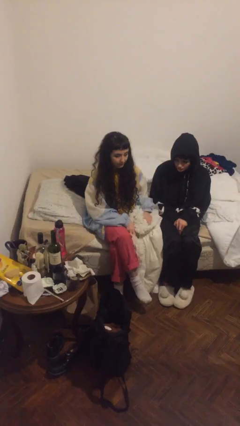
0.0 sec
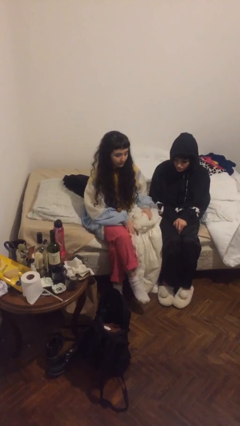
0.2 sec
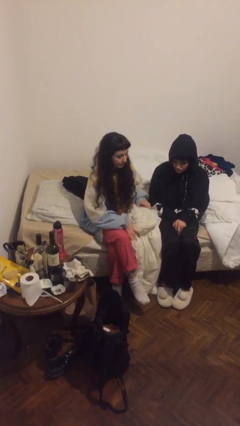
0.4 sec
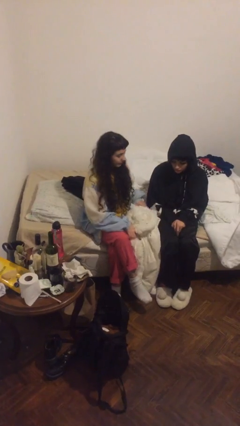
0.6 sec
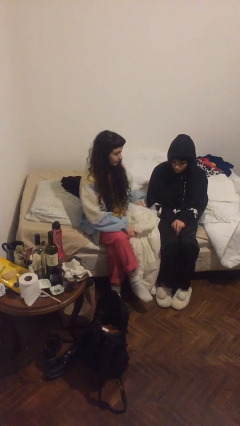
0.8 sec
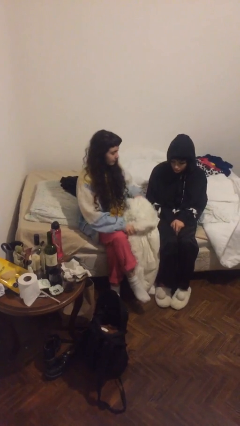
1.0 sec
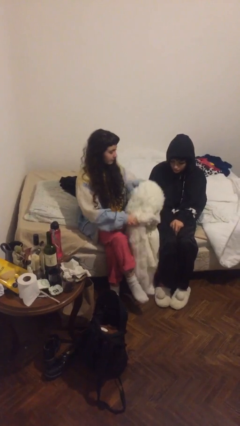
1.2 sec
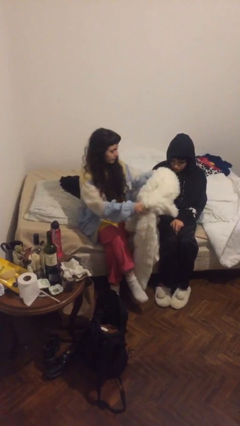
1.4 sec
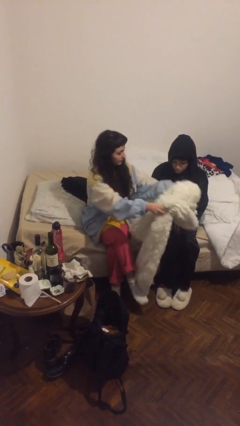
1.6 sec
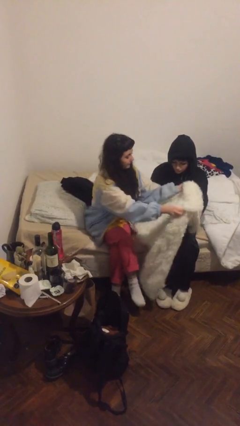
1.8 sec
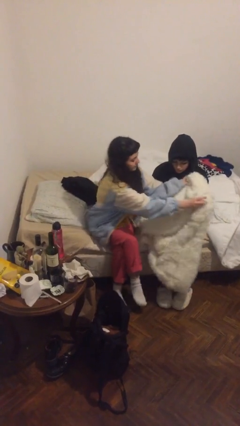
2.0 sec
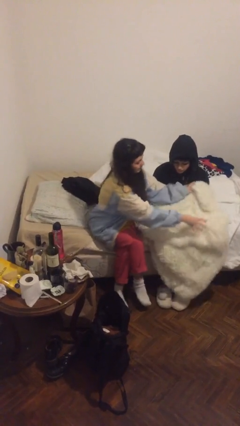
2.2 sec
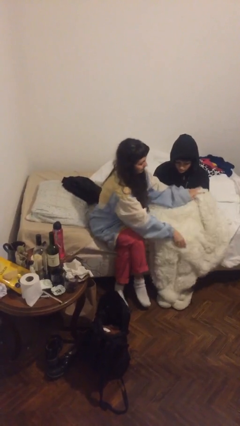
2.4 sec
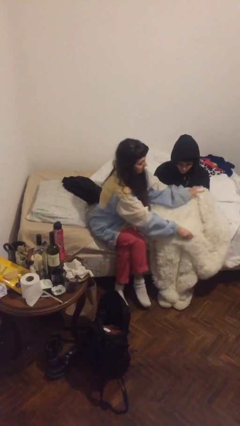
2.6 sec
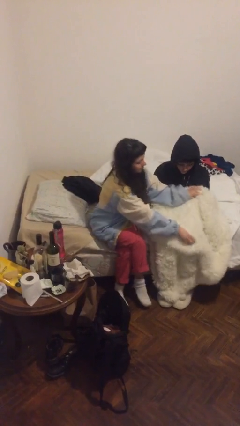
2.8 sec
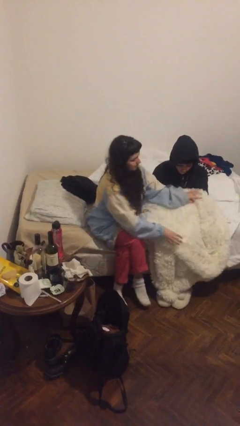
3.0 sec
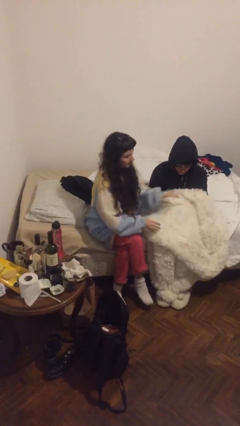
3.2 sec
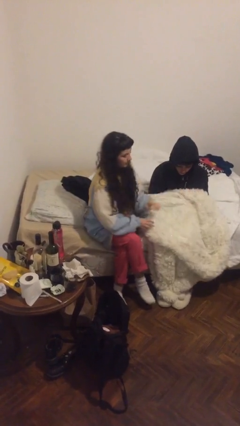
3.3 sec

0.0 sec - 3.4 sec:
person covers friend with blanket

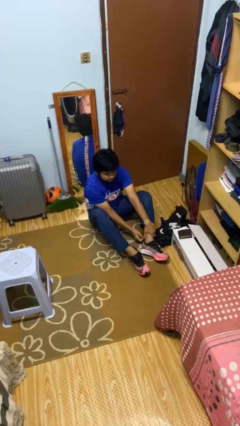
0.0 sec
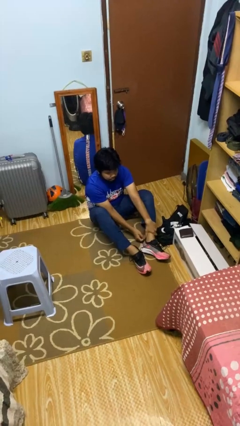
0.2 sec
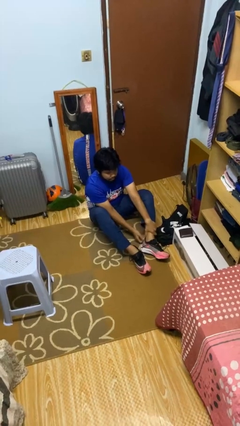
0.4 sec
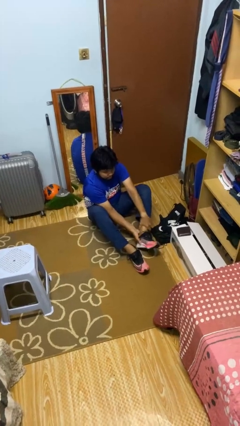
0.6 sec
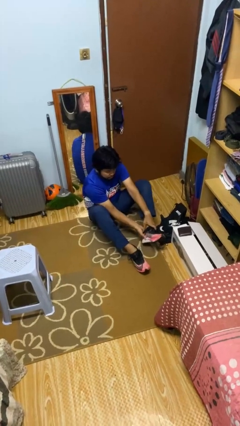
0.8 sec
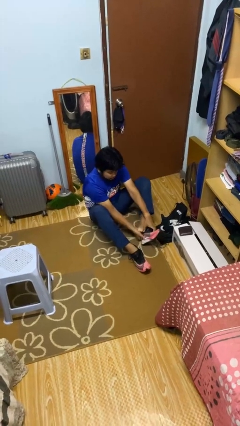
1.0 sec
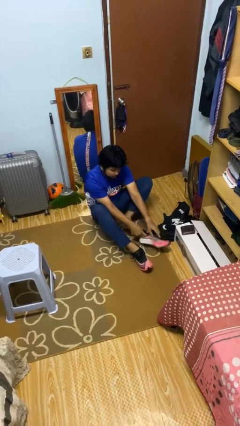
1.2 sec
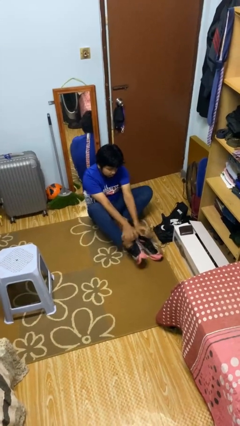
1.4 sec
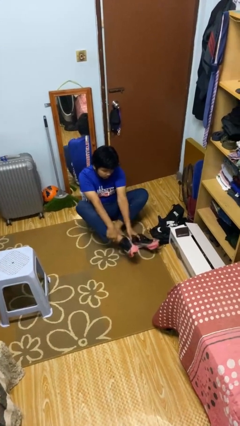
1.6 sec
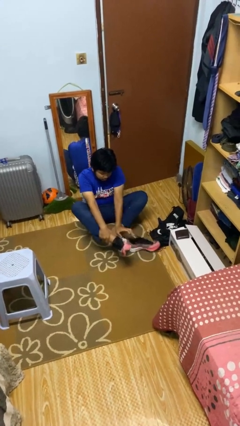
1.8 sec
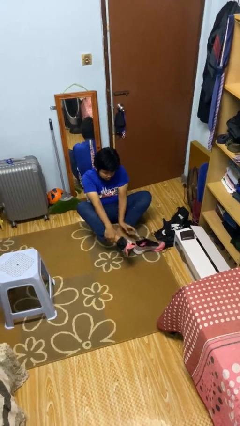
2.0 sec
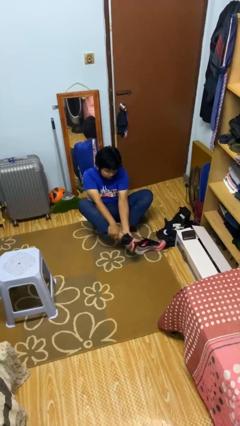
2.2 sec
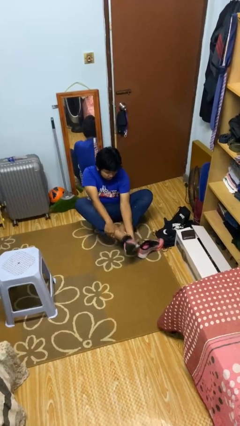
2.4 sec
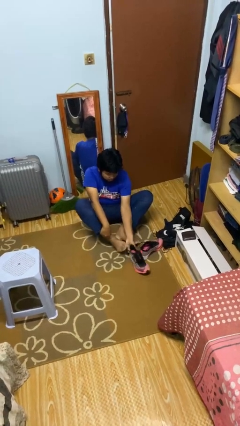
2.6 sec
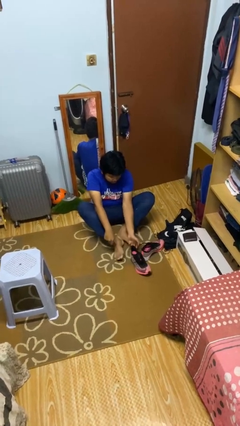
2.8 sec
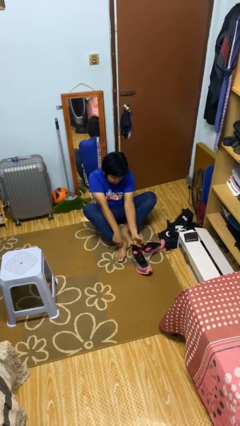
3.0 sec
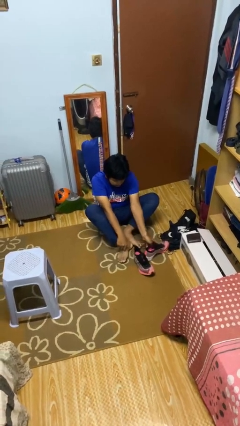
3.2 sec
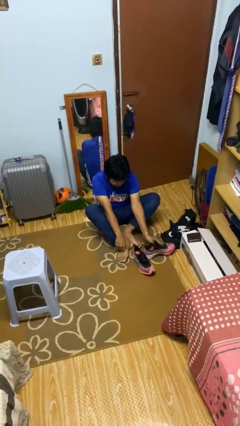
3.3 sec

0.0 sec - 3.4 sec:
person takes off shoes

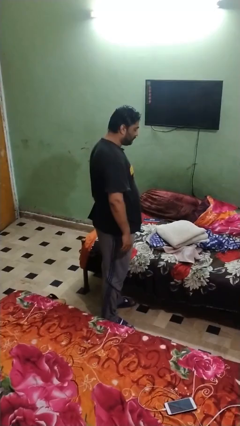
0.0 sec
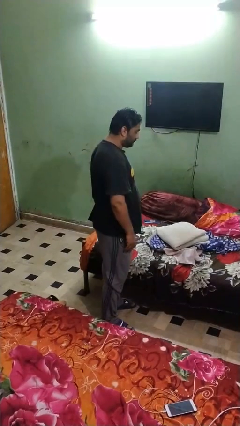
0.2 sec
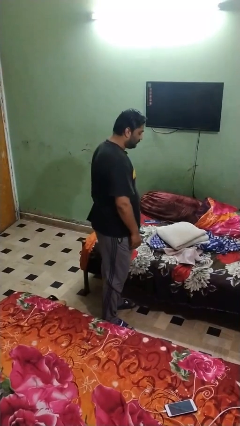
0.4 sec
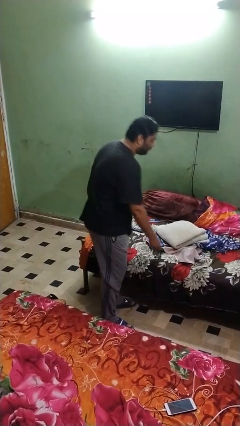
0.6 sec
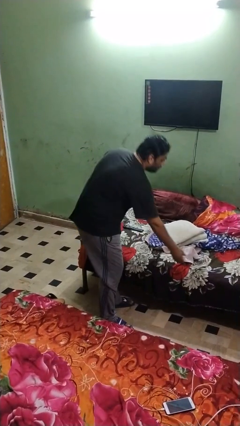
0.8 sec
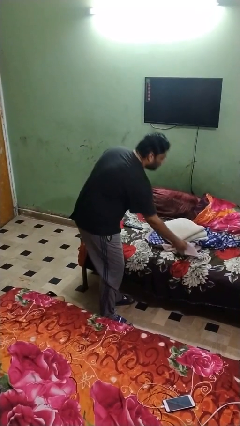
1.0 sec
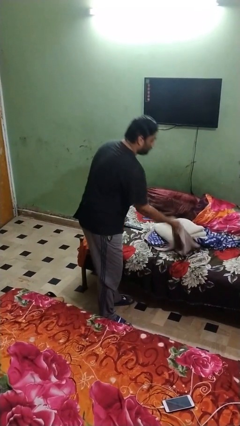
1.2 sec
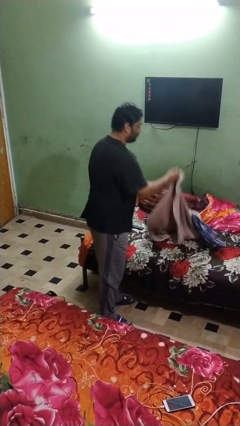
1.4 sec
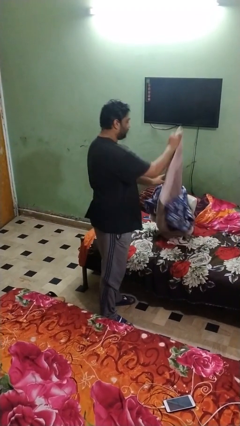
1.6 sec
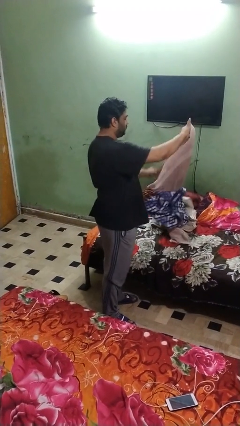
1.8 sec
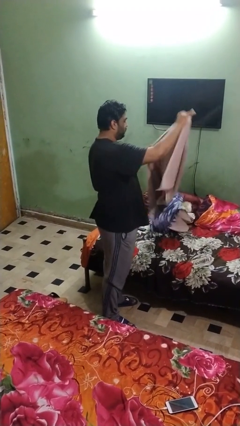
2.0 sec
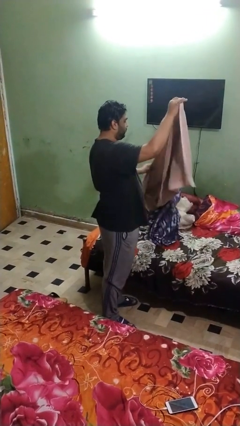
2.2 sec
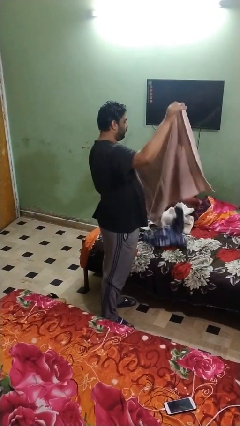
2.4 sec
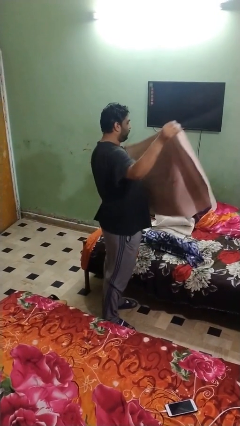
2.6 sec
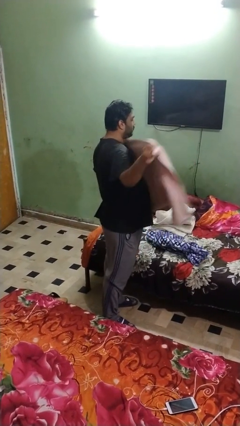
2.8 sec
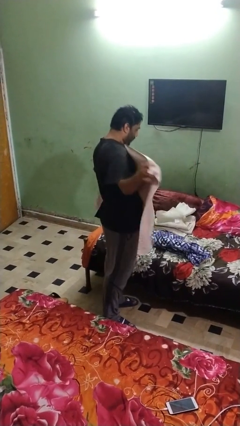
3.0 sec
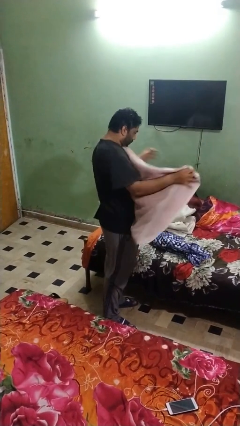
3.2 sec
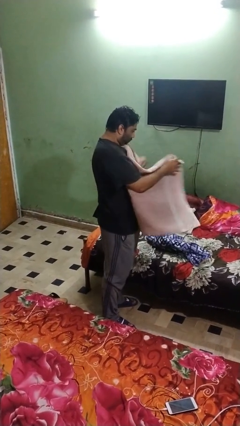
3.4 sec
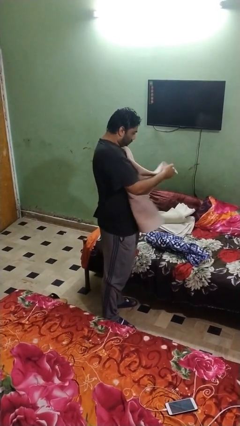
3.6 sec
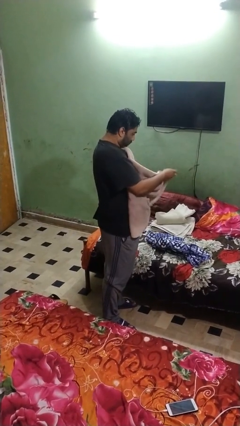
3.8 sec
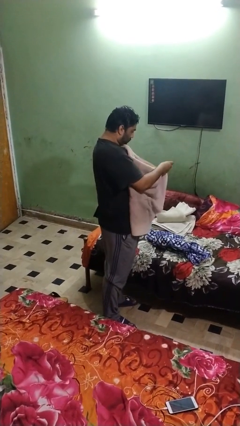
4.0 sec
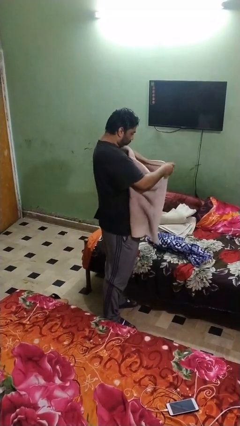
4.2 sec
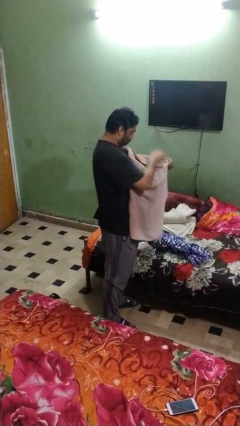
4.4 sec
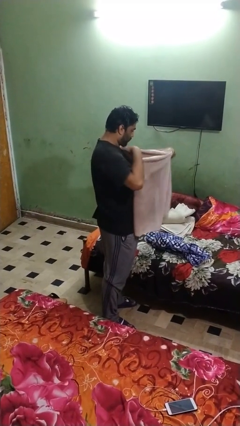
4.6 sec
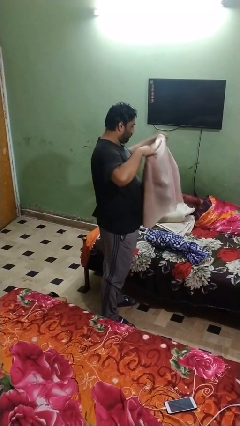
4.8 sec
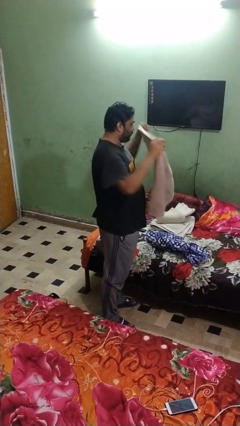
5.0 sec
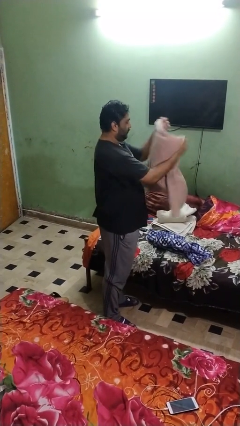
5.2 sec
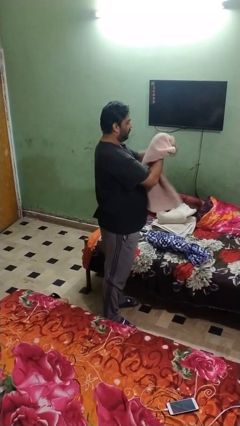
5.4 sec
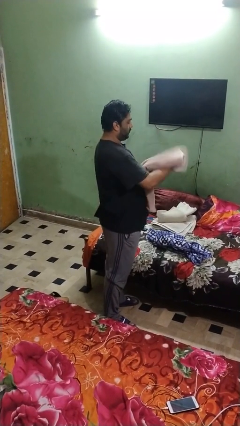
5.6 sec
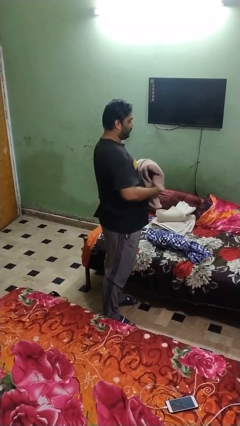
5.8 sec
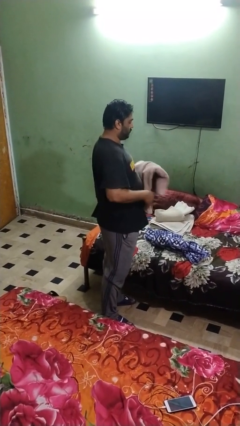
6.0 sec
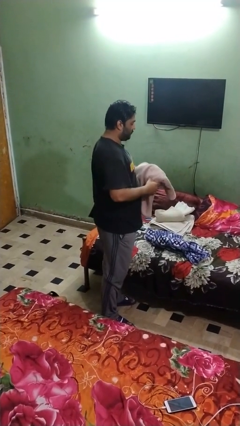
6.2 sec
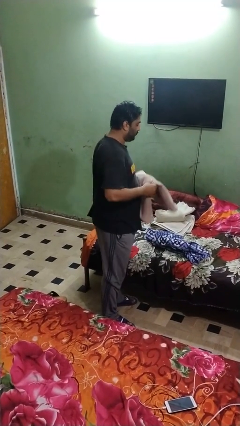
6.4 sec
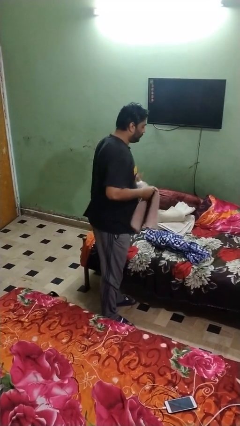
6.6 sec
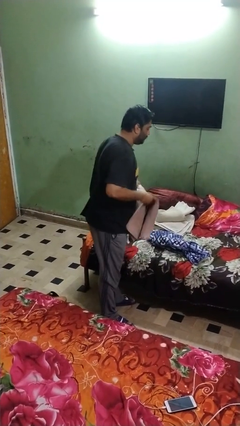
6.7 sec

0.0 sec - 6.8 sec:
person folds towel

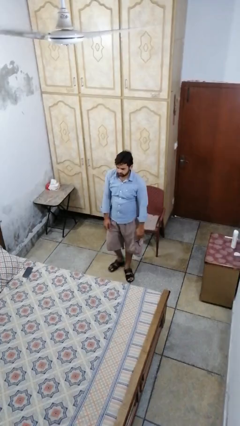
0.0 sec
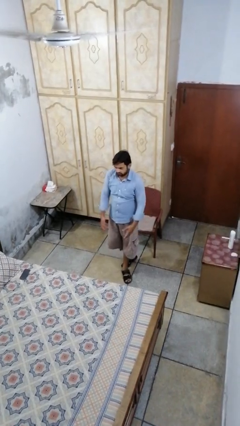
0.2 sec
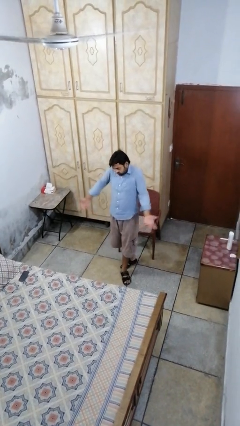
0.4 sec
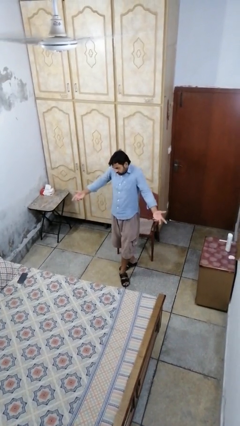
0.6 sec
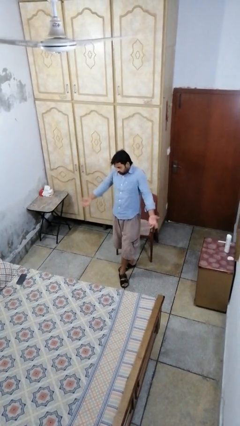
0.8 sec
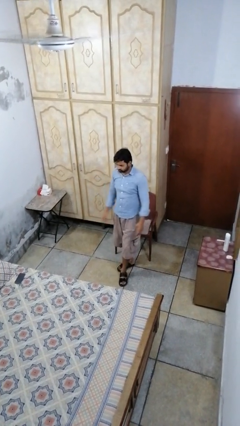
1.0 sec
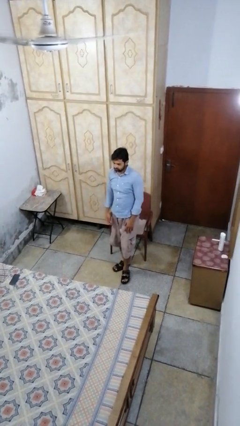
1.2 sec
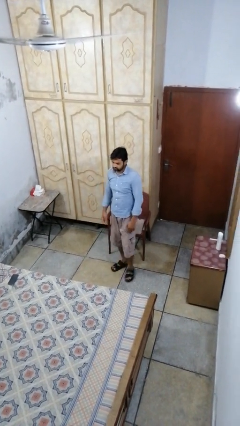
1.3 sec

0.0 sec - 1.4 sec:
person shrugs

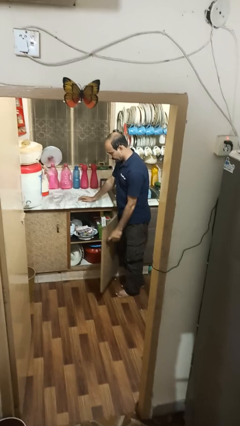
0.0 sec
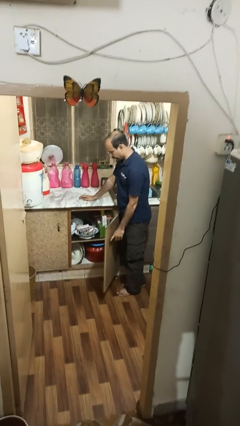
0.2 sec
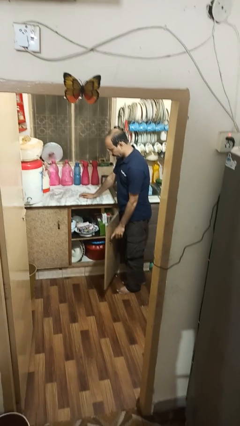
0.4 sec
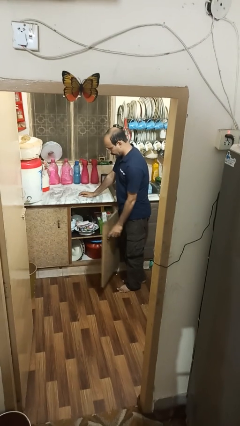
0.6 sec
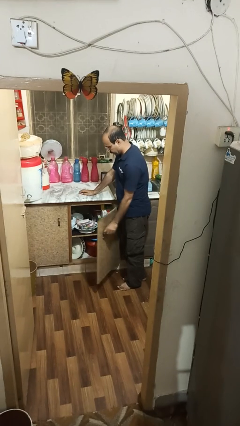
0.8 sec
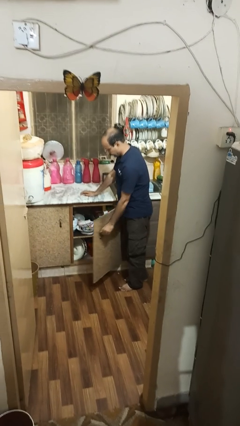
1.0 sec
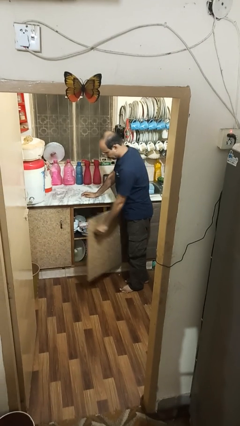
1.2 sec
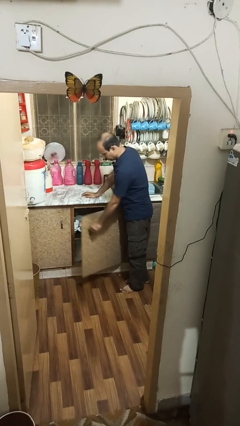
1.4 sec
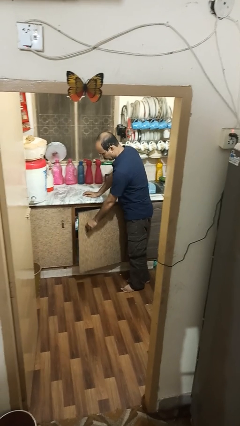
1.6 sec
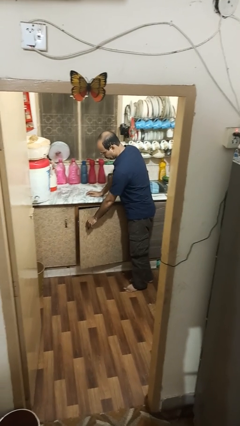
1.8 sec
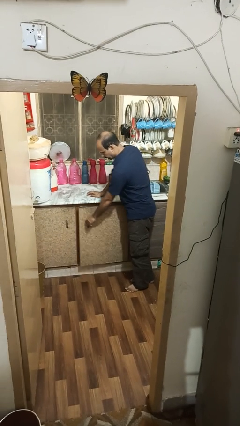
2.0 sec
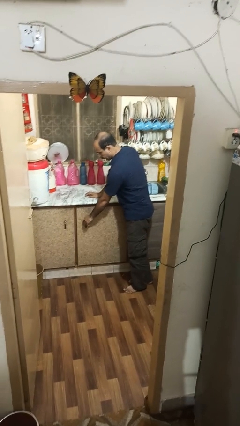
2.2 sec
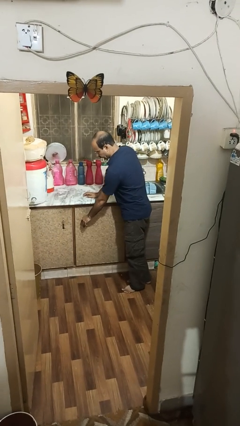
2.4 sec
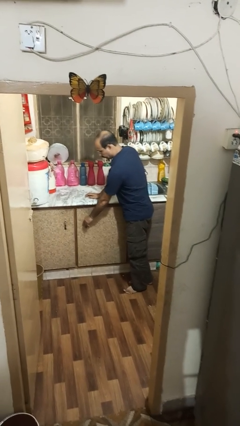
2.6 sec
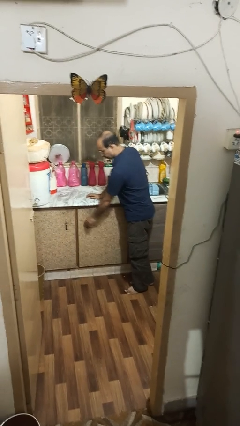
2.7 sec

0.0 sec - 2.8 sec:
person closes cabinet
